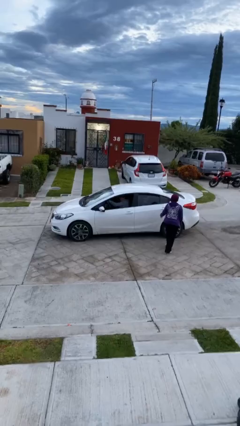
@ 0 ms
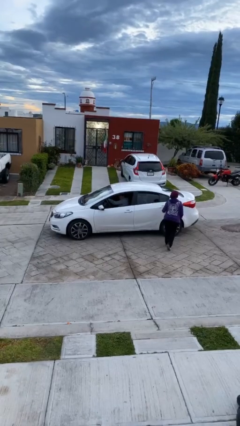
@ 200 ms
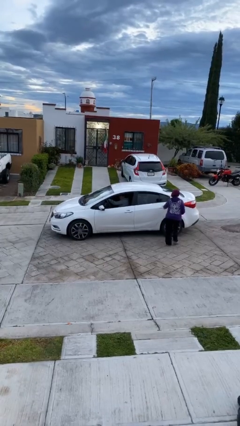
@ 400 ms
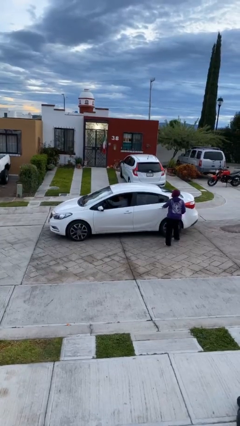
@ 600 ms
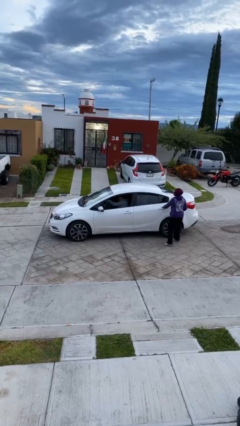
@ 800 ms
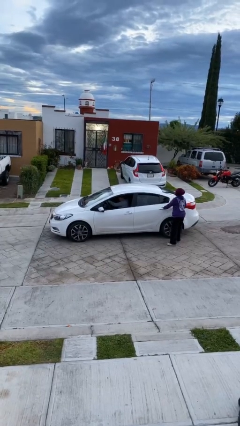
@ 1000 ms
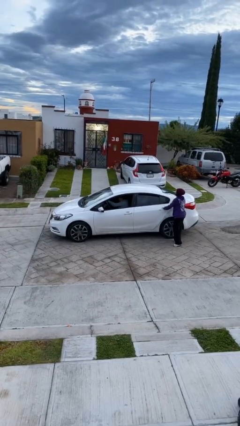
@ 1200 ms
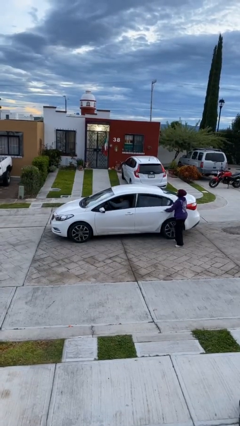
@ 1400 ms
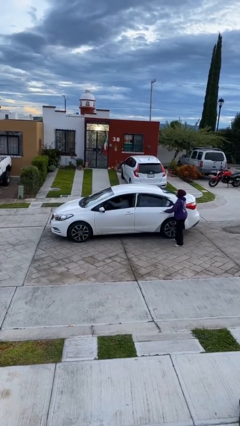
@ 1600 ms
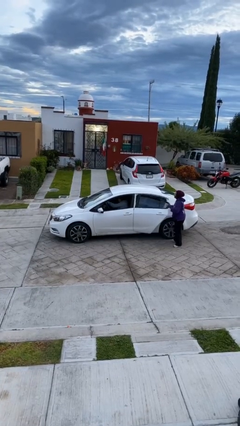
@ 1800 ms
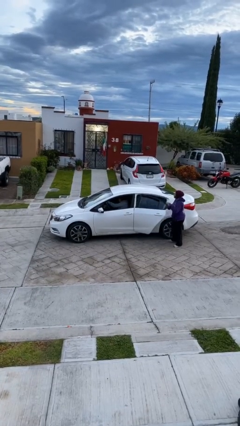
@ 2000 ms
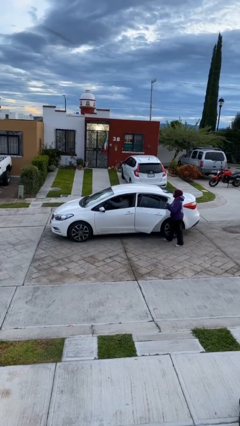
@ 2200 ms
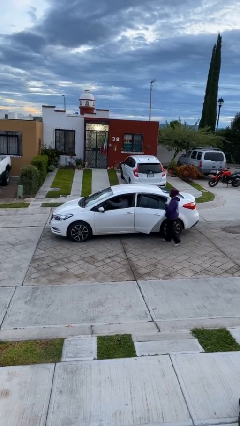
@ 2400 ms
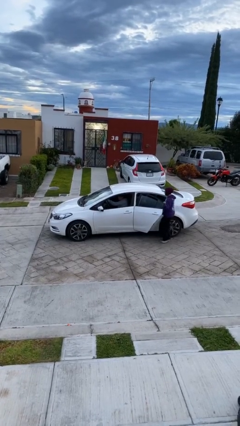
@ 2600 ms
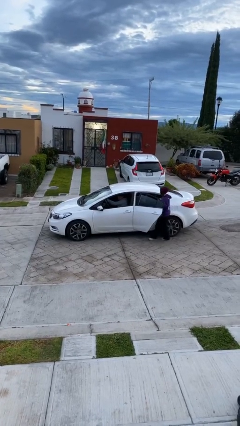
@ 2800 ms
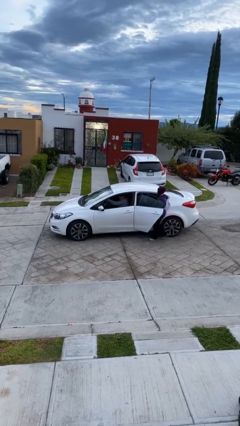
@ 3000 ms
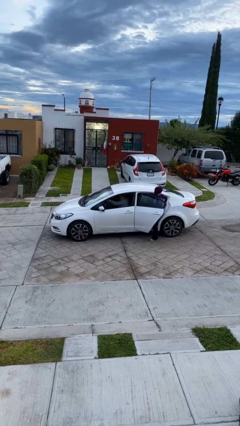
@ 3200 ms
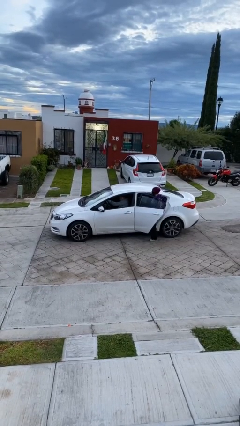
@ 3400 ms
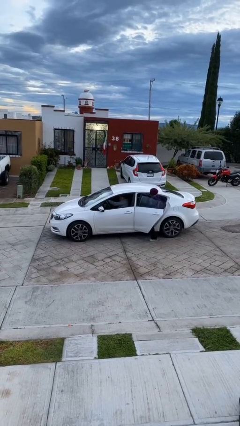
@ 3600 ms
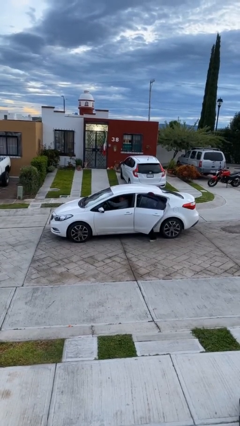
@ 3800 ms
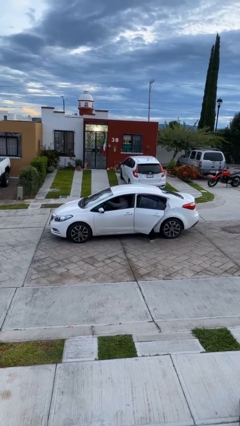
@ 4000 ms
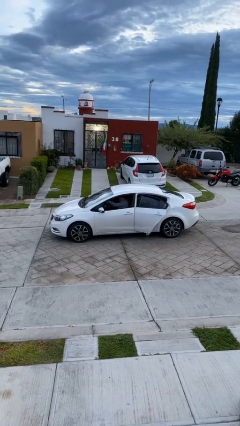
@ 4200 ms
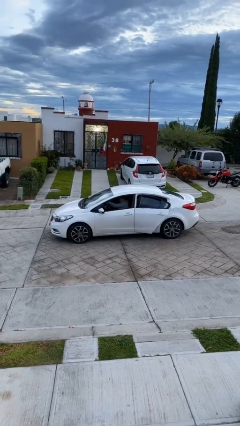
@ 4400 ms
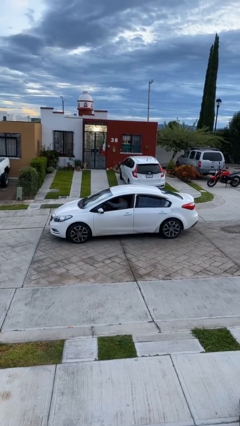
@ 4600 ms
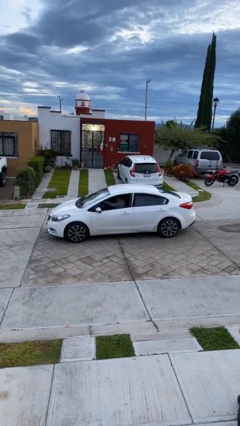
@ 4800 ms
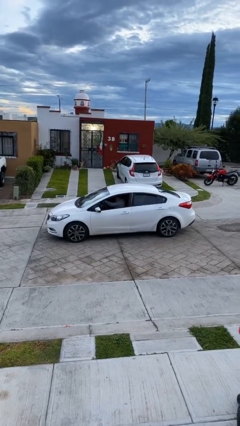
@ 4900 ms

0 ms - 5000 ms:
car picks up person

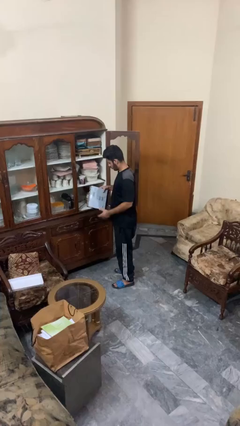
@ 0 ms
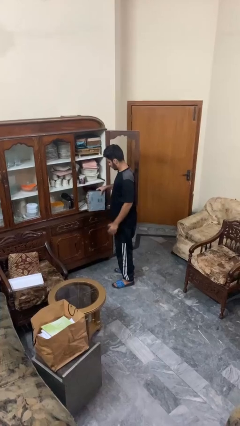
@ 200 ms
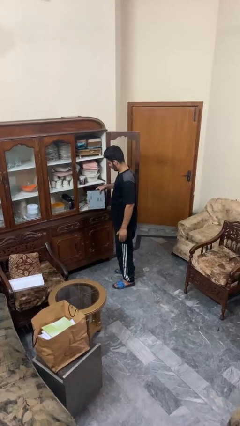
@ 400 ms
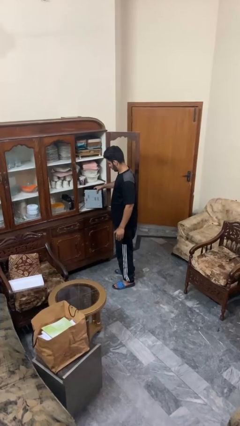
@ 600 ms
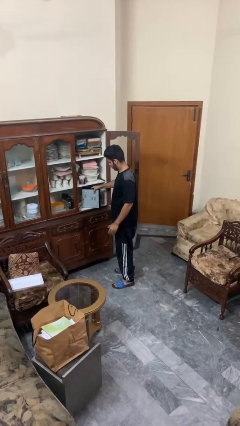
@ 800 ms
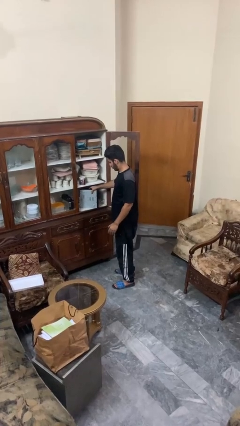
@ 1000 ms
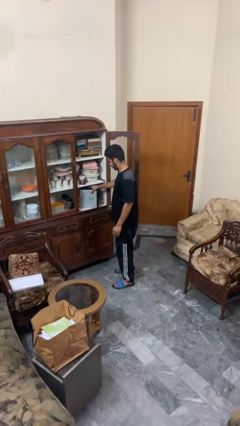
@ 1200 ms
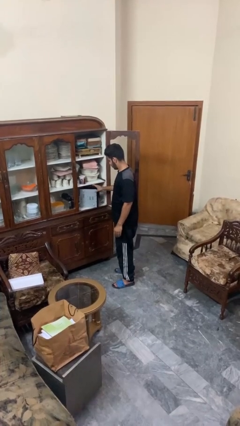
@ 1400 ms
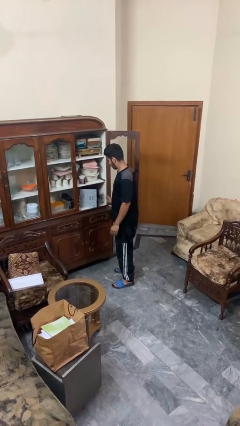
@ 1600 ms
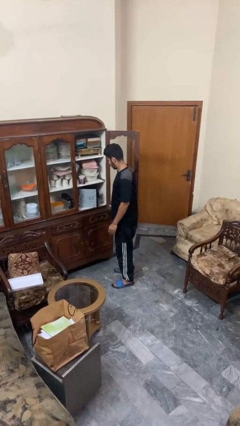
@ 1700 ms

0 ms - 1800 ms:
person puts down object into cabinet

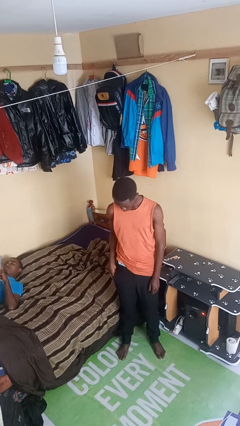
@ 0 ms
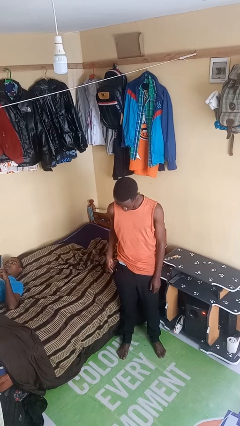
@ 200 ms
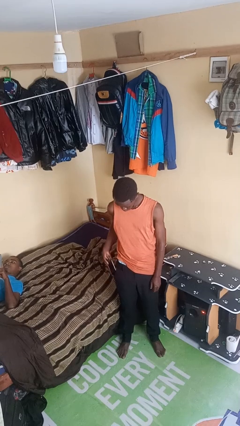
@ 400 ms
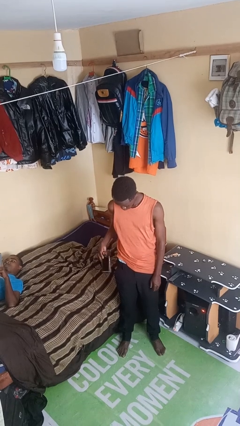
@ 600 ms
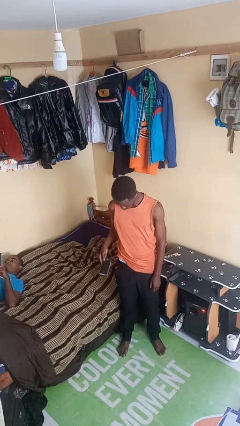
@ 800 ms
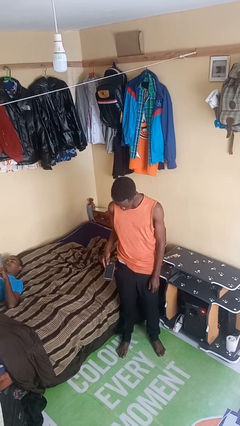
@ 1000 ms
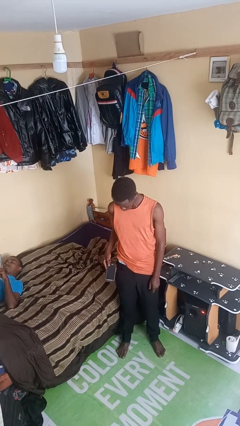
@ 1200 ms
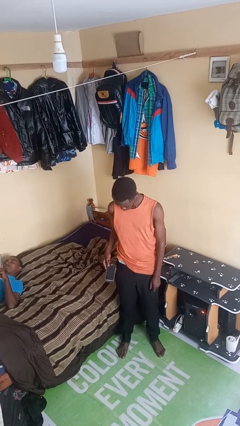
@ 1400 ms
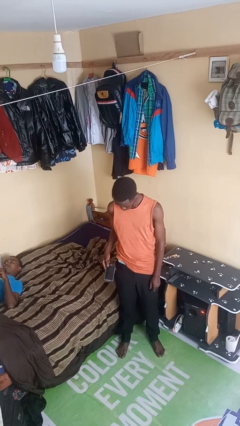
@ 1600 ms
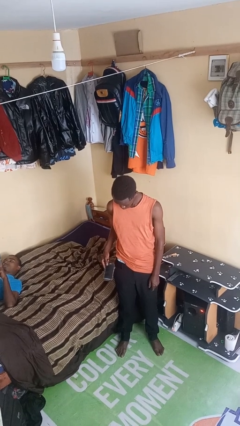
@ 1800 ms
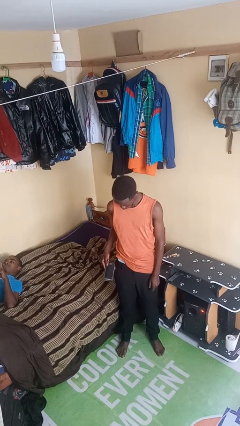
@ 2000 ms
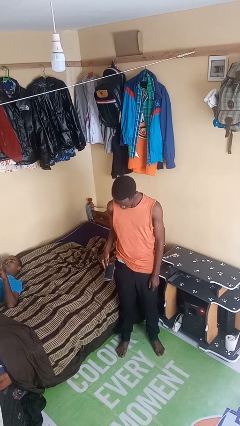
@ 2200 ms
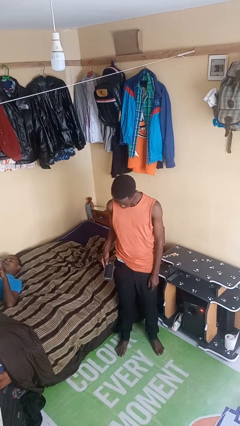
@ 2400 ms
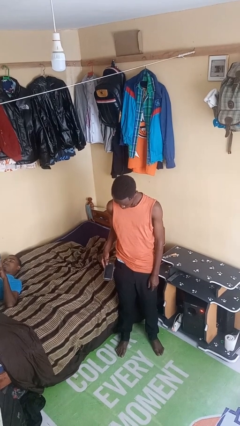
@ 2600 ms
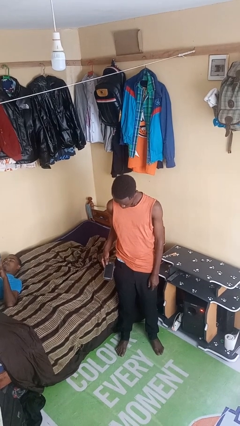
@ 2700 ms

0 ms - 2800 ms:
person takes phone from pocket

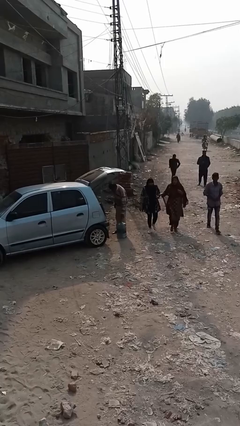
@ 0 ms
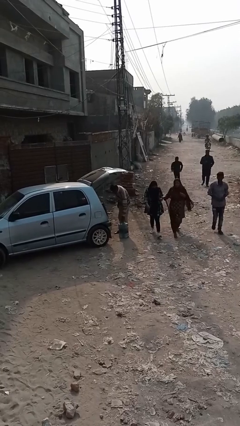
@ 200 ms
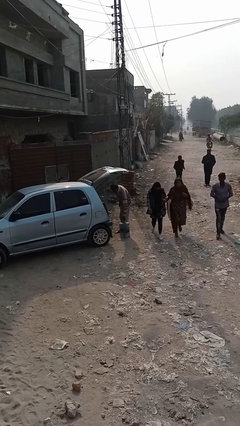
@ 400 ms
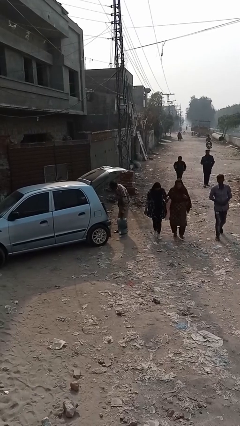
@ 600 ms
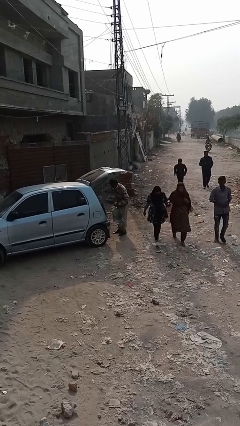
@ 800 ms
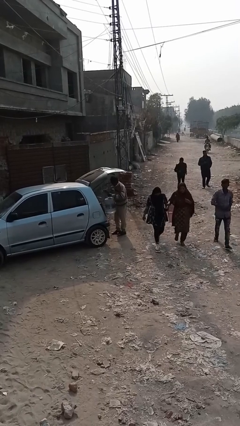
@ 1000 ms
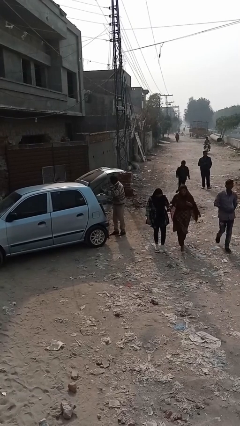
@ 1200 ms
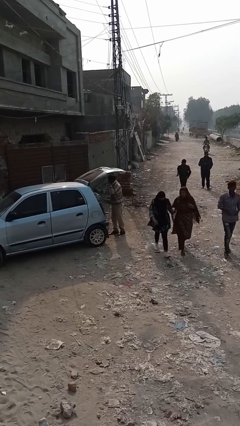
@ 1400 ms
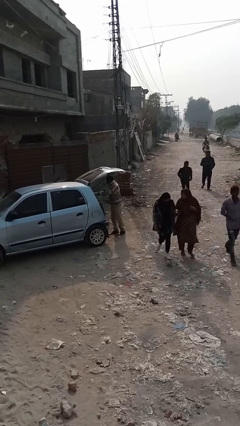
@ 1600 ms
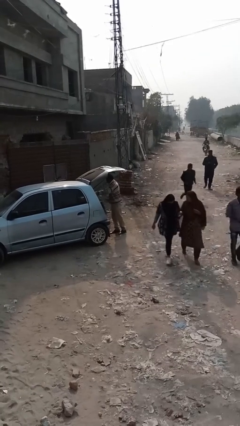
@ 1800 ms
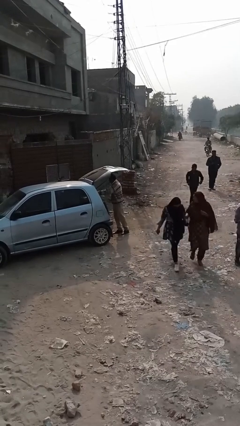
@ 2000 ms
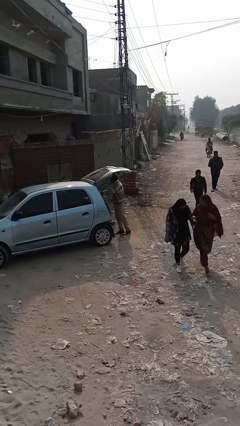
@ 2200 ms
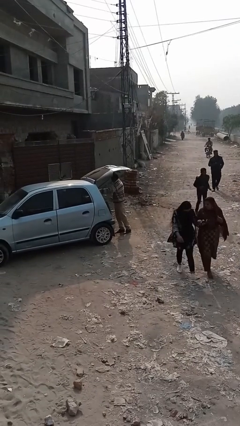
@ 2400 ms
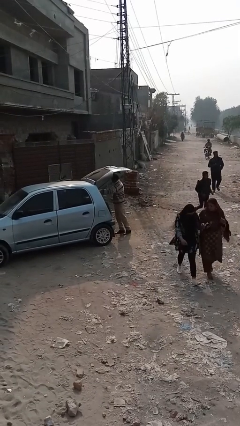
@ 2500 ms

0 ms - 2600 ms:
person loads car

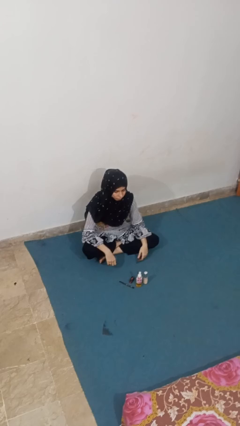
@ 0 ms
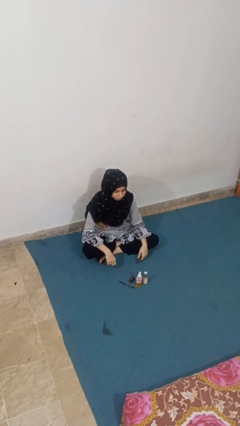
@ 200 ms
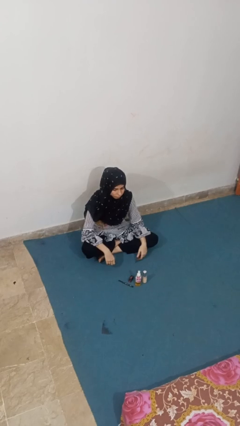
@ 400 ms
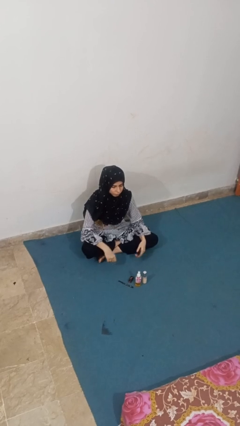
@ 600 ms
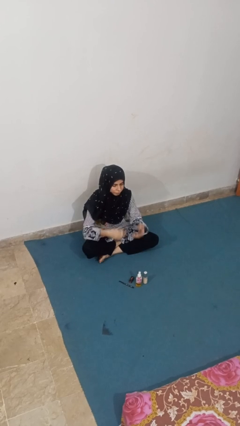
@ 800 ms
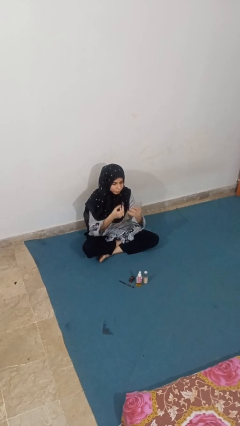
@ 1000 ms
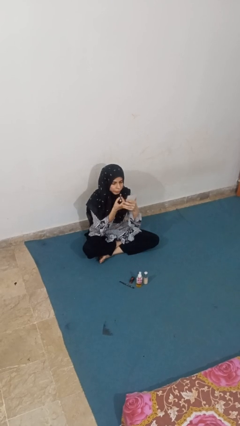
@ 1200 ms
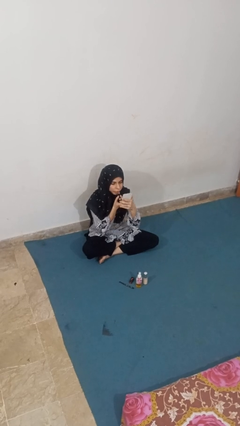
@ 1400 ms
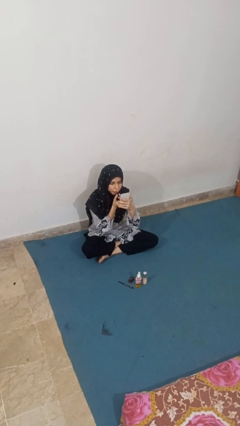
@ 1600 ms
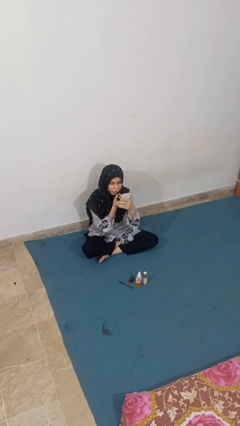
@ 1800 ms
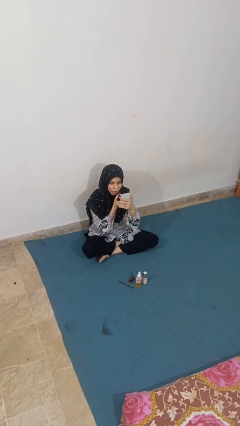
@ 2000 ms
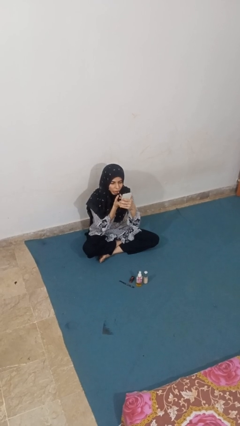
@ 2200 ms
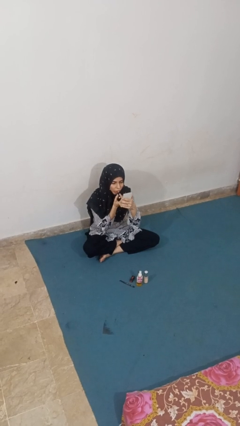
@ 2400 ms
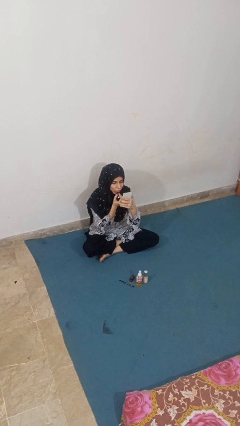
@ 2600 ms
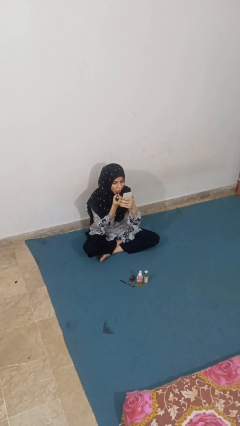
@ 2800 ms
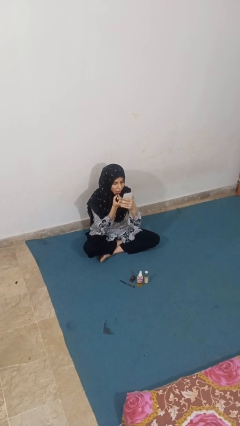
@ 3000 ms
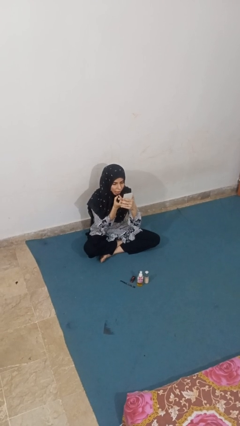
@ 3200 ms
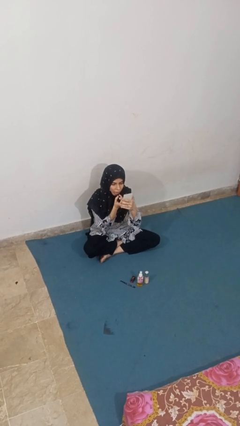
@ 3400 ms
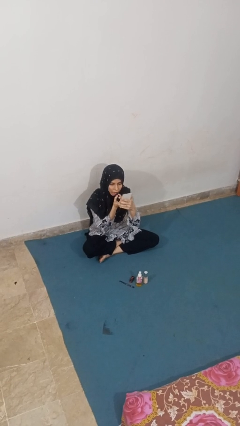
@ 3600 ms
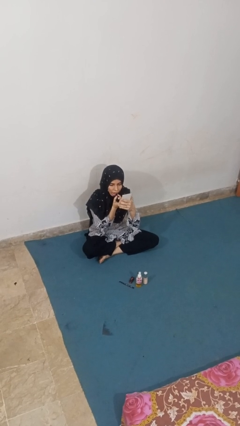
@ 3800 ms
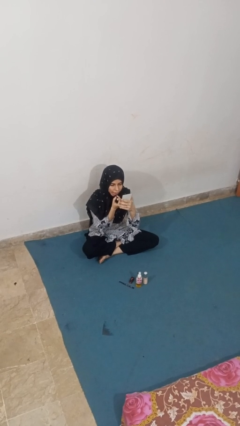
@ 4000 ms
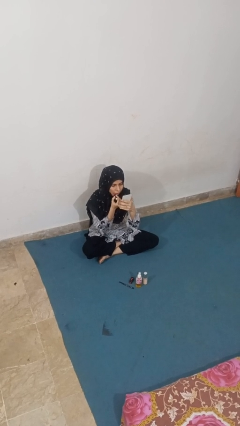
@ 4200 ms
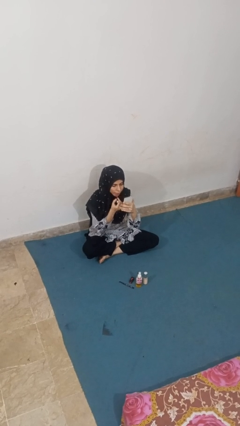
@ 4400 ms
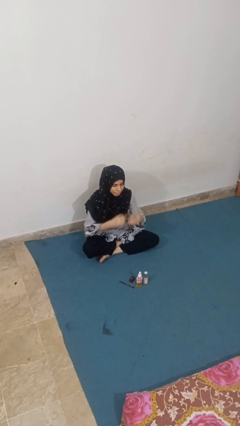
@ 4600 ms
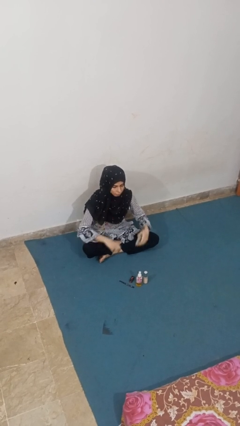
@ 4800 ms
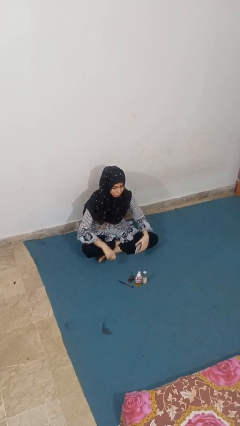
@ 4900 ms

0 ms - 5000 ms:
person applies lip makeup
